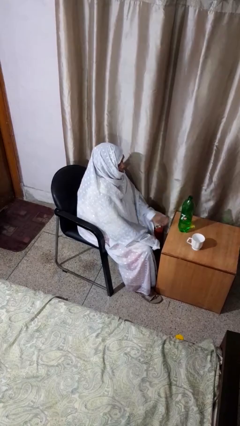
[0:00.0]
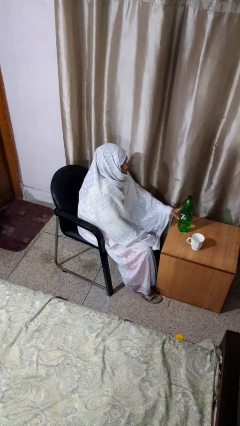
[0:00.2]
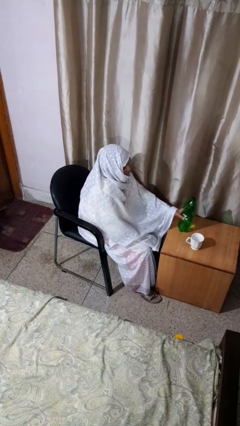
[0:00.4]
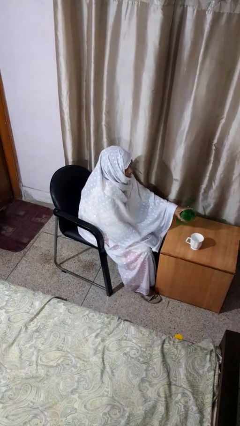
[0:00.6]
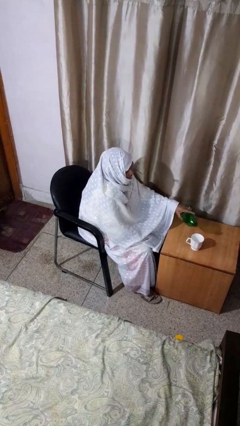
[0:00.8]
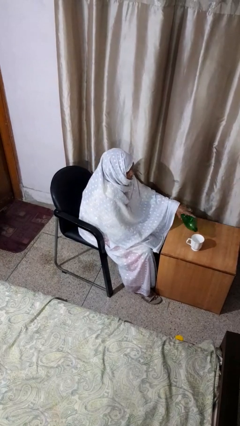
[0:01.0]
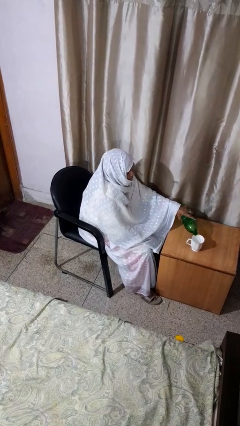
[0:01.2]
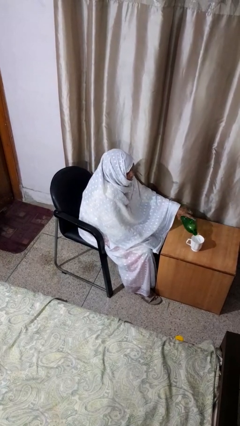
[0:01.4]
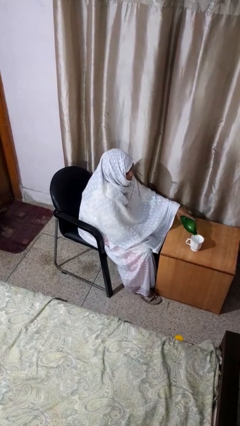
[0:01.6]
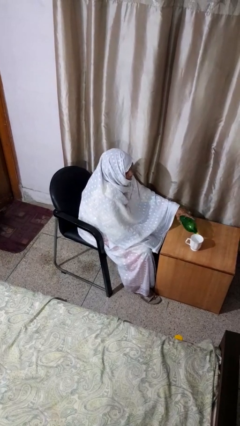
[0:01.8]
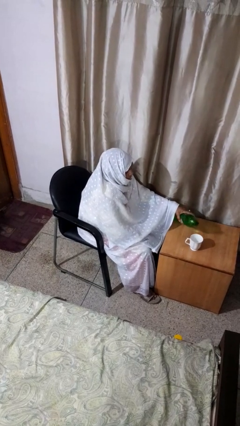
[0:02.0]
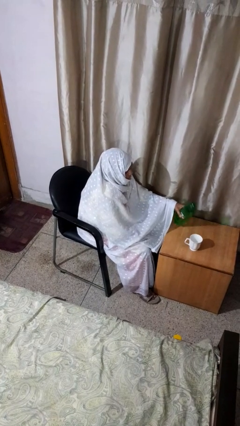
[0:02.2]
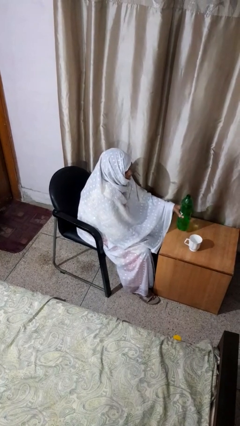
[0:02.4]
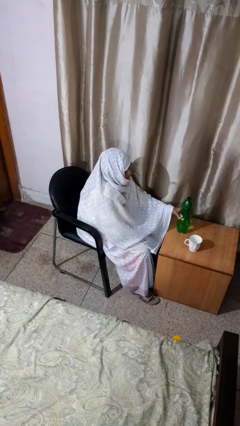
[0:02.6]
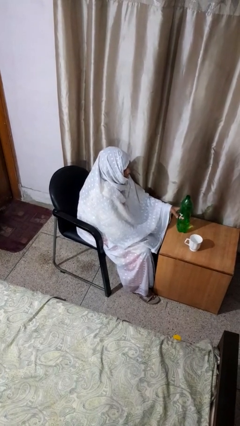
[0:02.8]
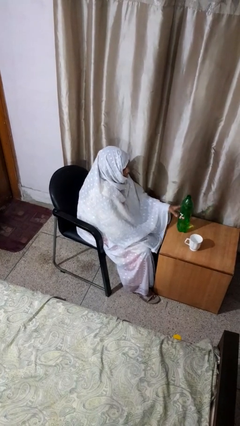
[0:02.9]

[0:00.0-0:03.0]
person pours liquid into cup

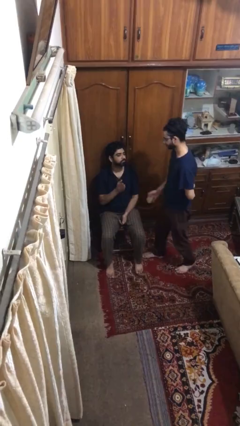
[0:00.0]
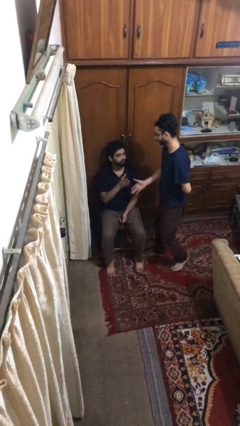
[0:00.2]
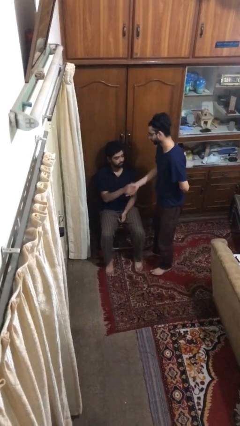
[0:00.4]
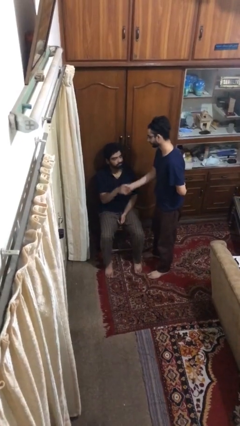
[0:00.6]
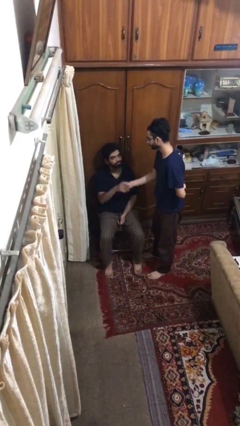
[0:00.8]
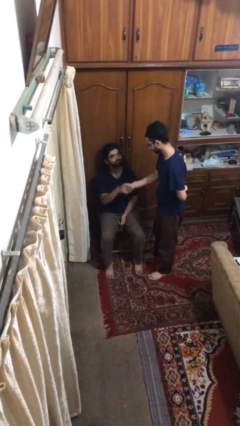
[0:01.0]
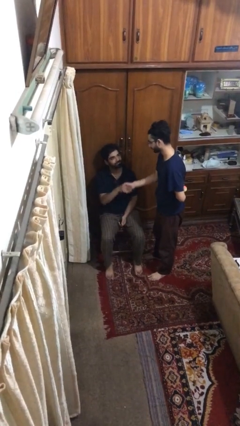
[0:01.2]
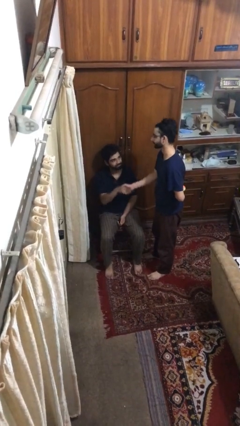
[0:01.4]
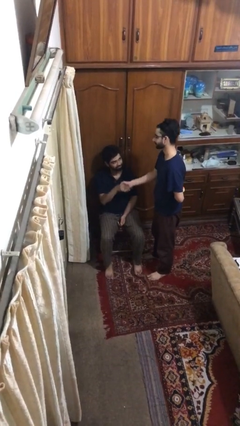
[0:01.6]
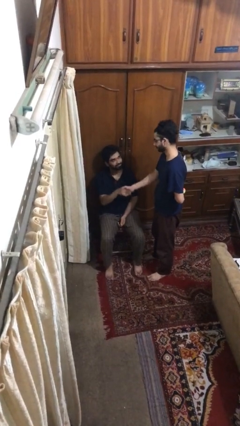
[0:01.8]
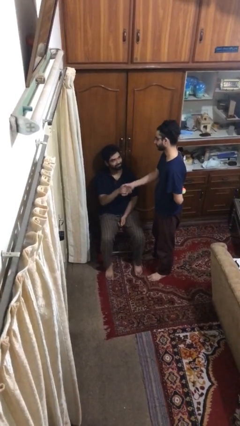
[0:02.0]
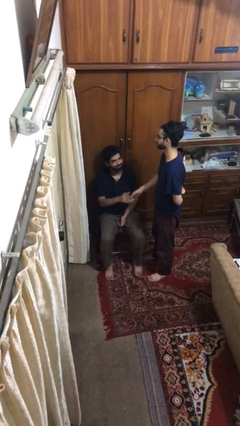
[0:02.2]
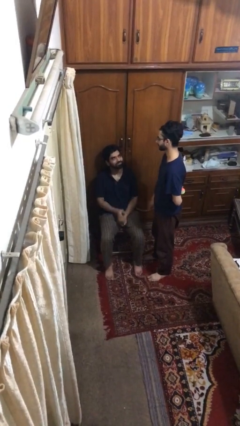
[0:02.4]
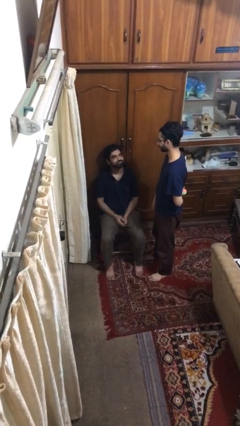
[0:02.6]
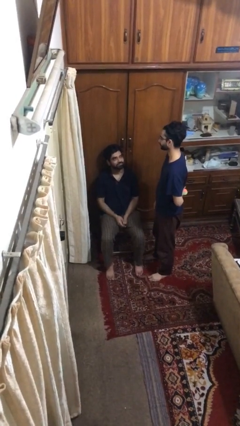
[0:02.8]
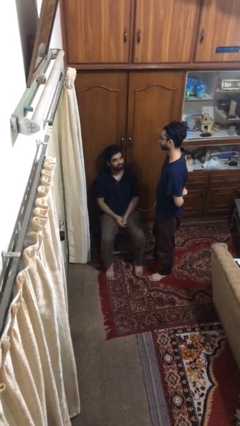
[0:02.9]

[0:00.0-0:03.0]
person shakes hand

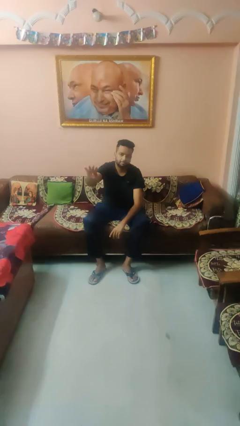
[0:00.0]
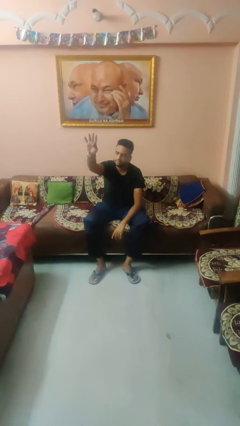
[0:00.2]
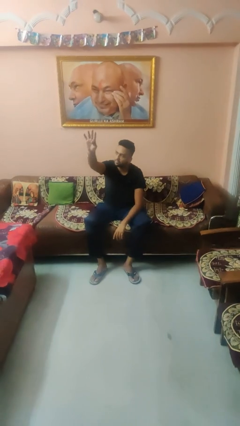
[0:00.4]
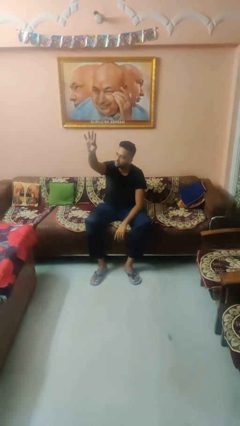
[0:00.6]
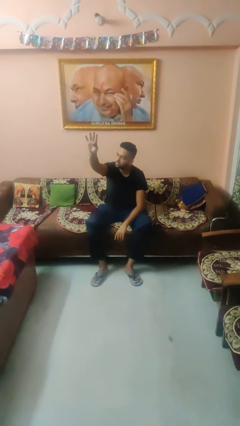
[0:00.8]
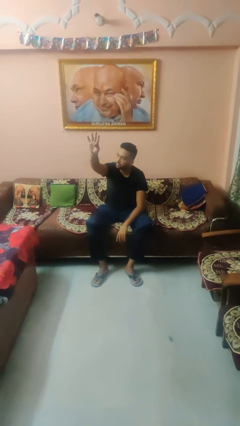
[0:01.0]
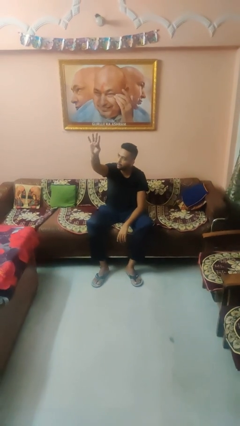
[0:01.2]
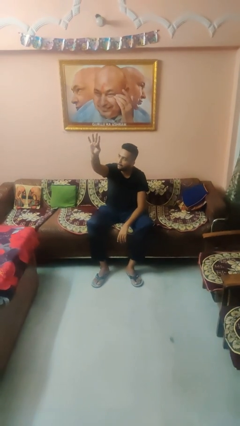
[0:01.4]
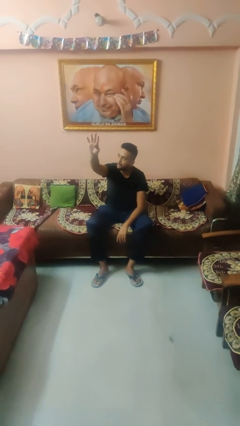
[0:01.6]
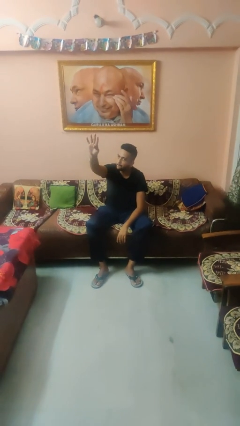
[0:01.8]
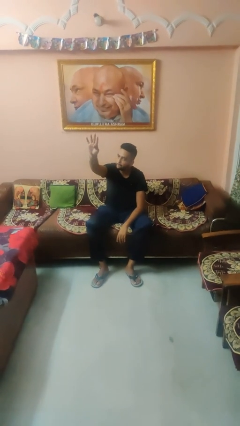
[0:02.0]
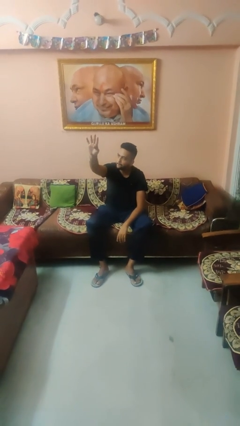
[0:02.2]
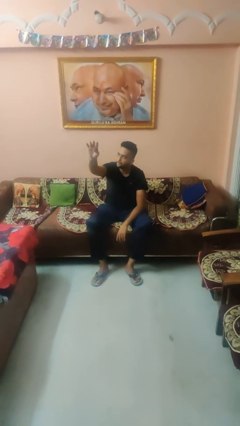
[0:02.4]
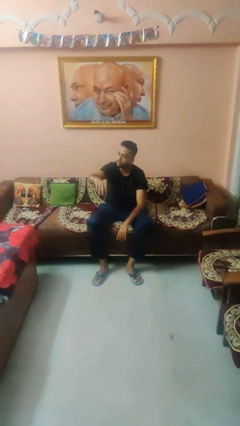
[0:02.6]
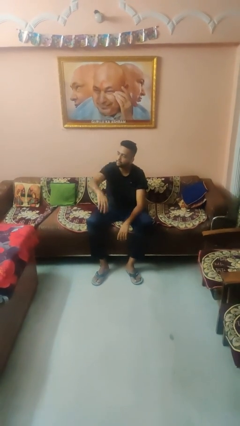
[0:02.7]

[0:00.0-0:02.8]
person gestures number four

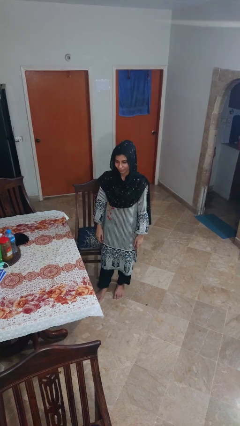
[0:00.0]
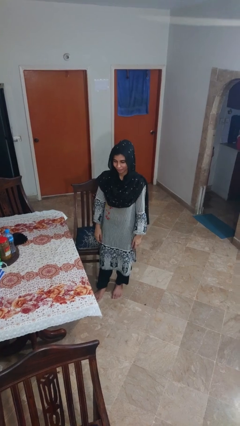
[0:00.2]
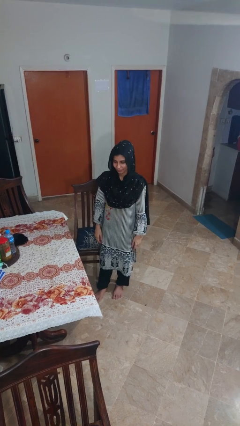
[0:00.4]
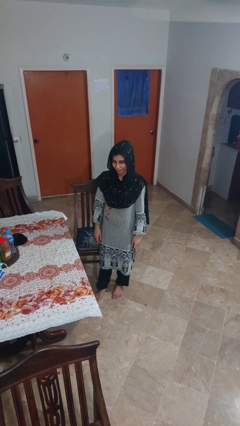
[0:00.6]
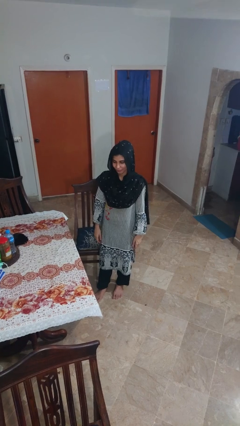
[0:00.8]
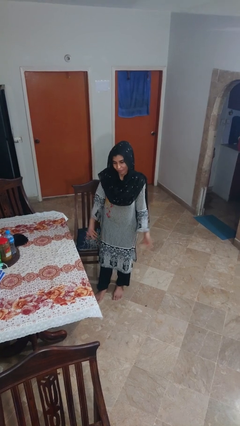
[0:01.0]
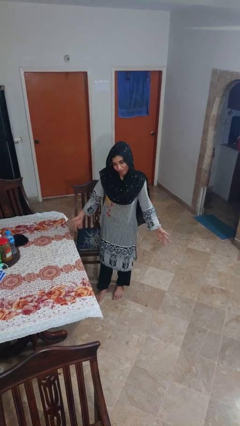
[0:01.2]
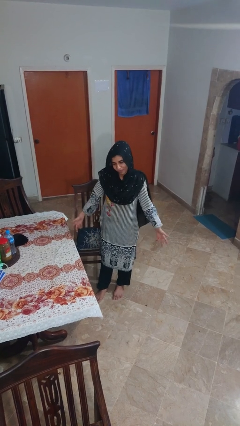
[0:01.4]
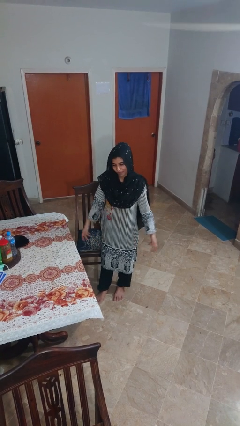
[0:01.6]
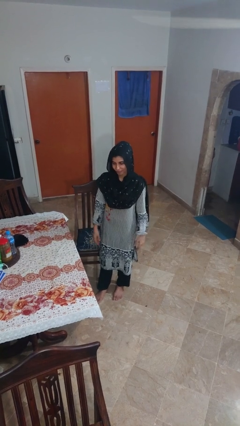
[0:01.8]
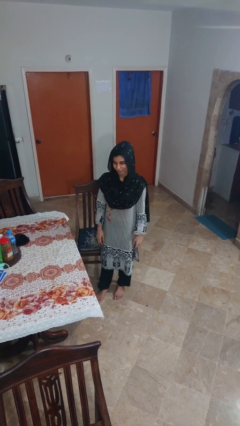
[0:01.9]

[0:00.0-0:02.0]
person shrugs

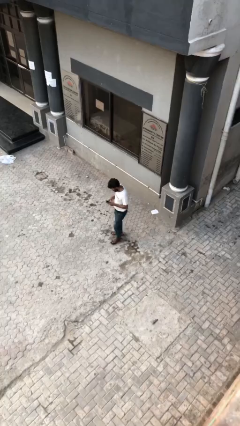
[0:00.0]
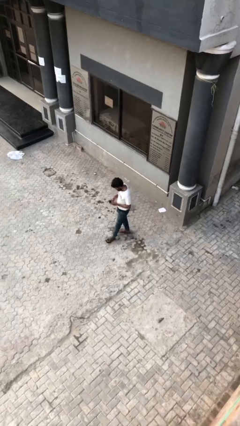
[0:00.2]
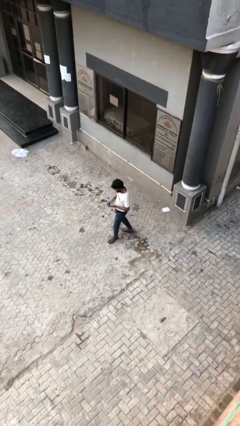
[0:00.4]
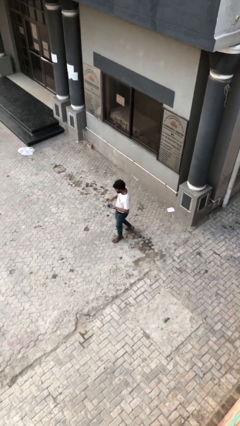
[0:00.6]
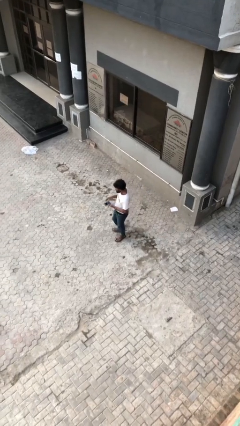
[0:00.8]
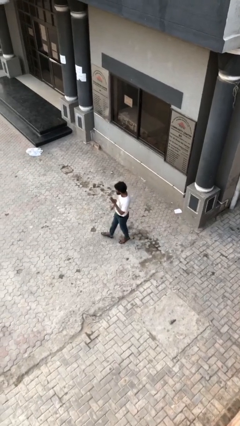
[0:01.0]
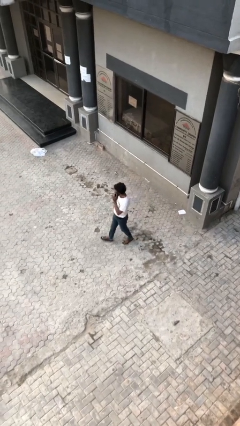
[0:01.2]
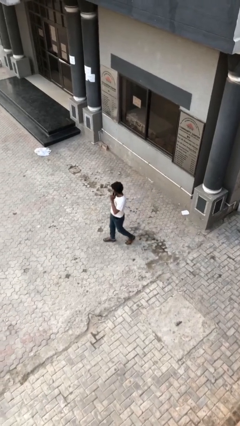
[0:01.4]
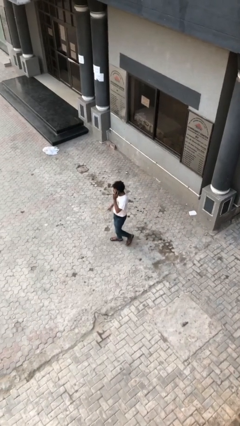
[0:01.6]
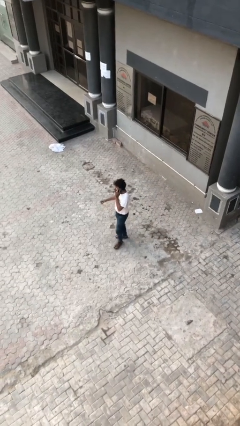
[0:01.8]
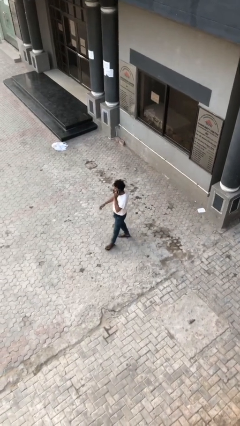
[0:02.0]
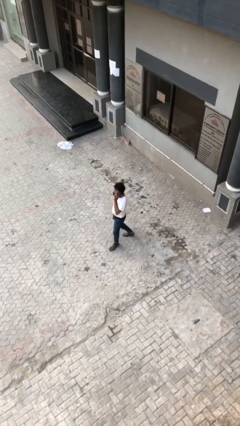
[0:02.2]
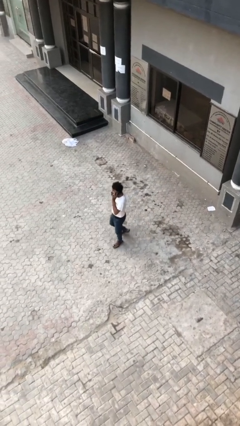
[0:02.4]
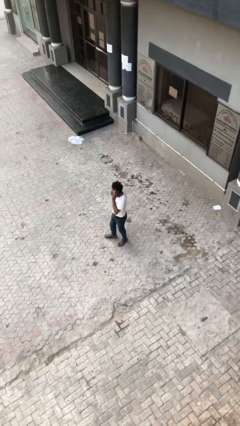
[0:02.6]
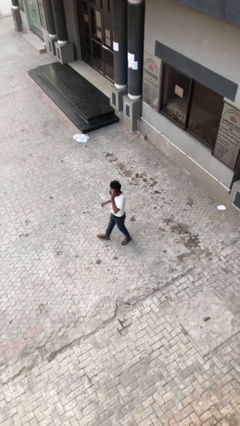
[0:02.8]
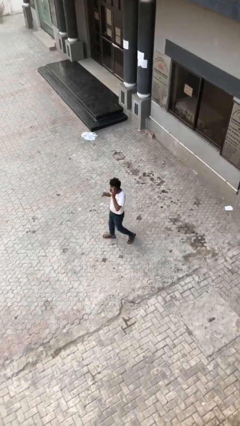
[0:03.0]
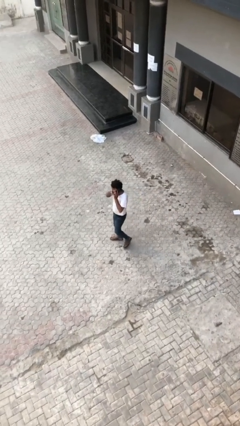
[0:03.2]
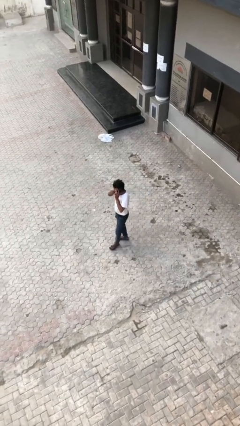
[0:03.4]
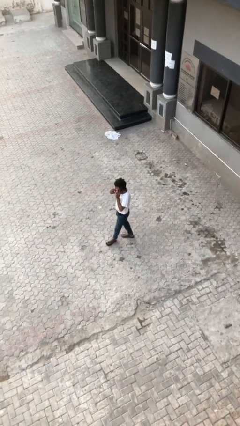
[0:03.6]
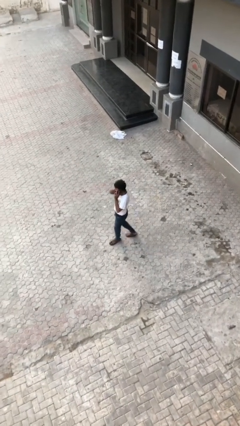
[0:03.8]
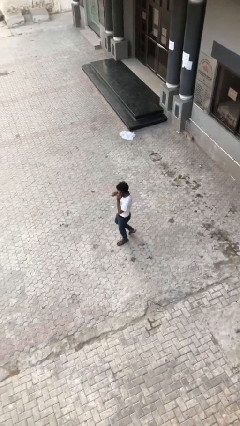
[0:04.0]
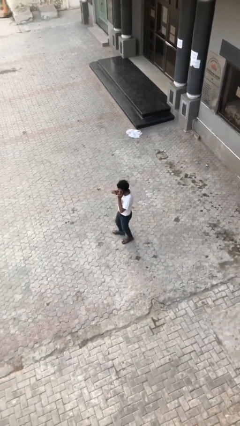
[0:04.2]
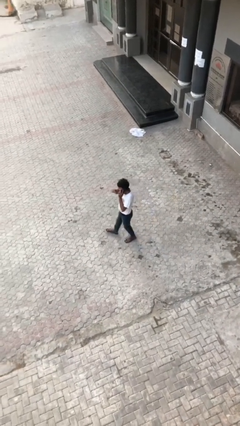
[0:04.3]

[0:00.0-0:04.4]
person talks on phone

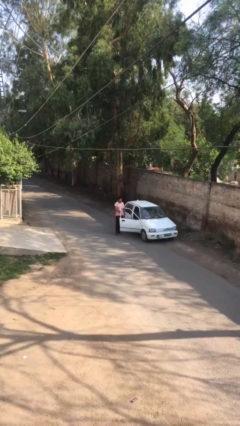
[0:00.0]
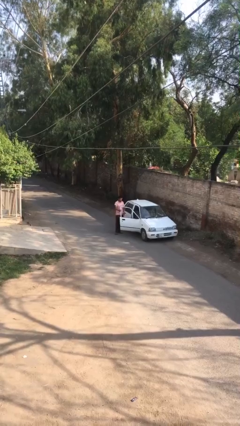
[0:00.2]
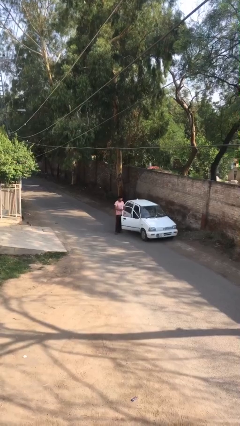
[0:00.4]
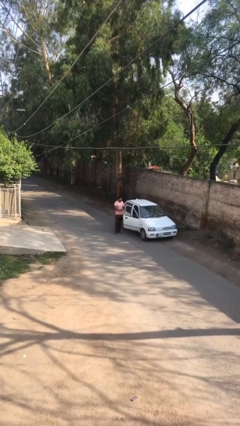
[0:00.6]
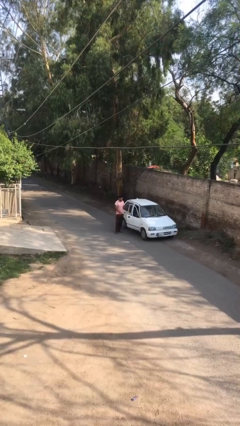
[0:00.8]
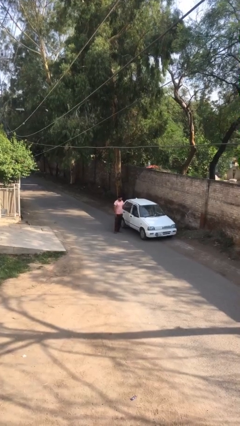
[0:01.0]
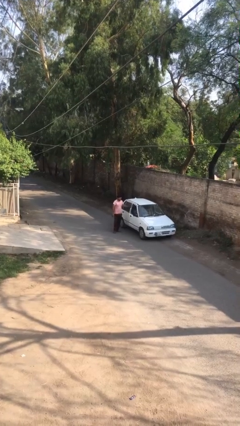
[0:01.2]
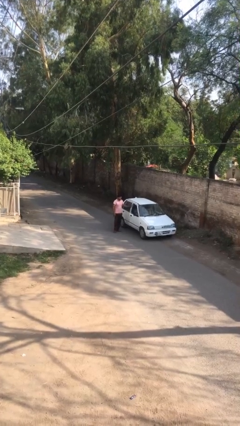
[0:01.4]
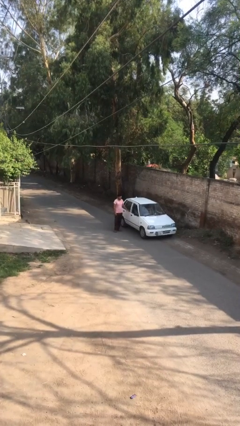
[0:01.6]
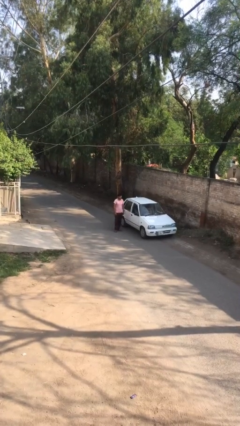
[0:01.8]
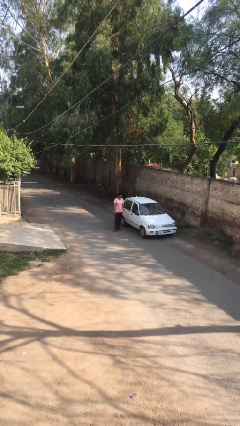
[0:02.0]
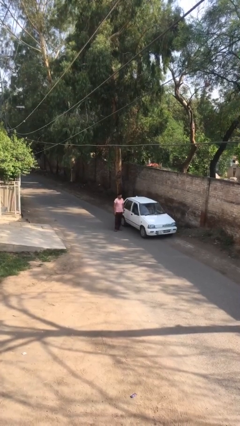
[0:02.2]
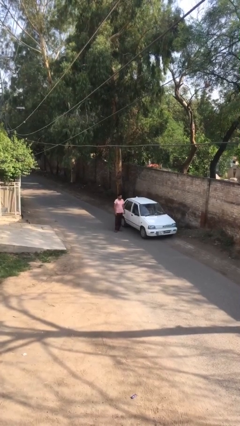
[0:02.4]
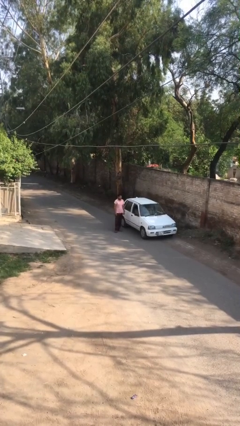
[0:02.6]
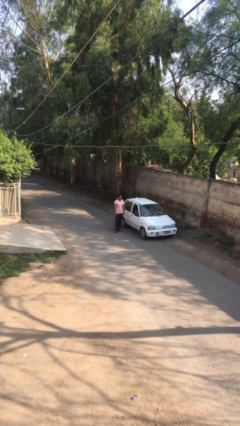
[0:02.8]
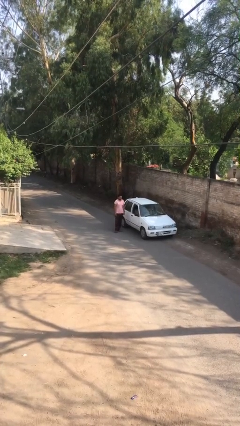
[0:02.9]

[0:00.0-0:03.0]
person closes car door
